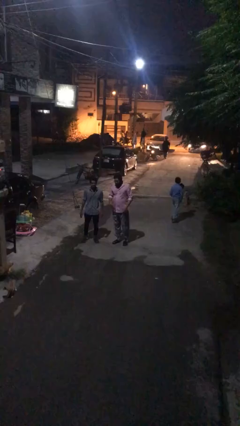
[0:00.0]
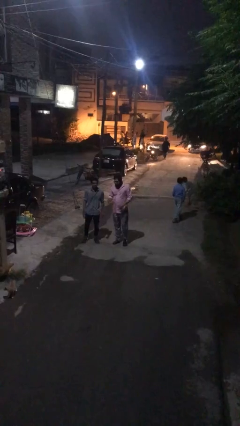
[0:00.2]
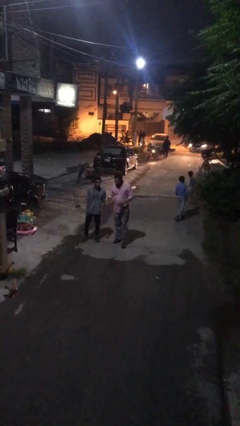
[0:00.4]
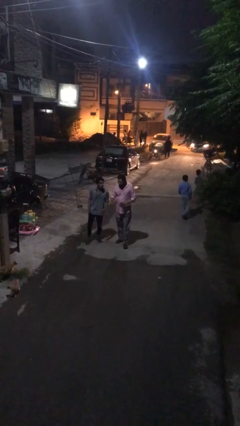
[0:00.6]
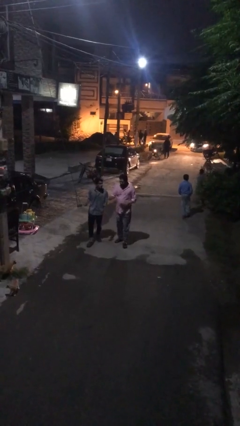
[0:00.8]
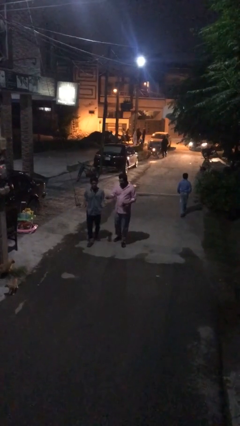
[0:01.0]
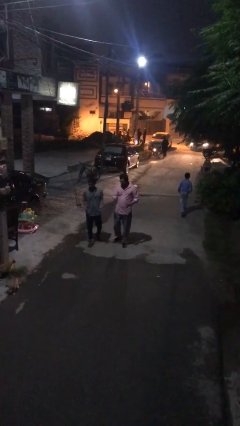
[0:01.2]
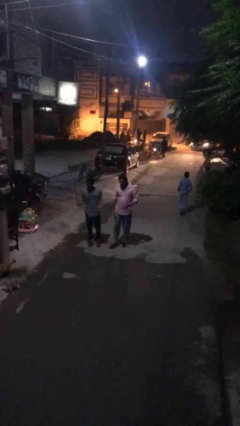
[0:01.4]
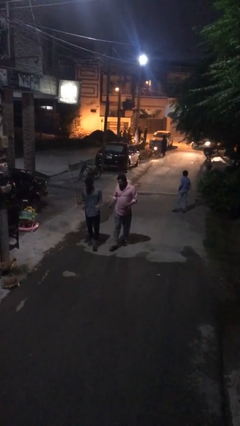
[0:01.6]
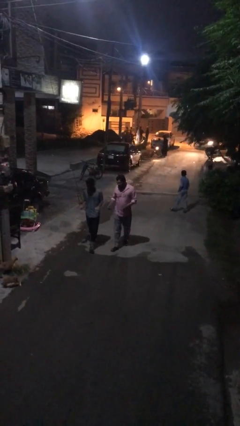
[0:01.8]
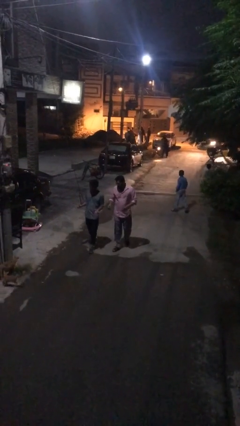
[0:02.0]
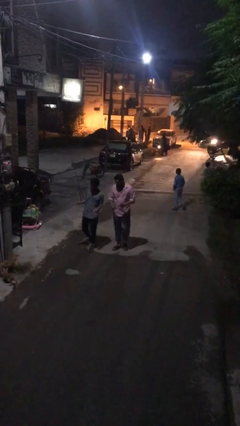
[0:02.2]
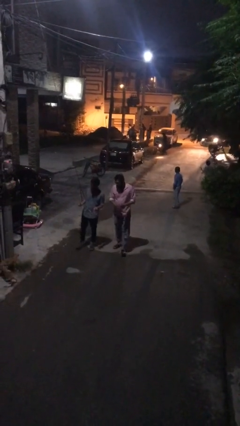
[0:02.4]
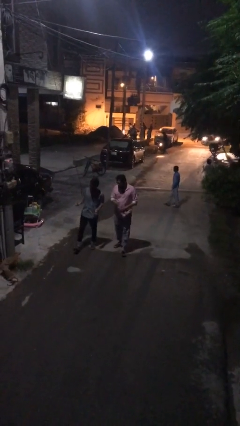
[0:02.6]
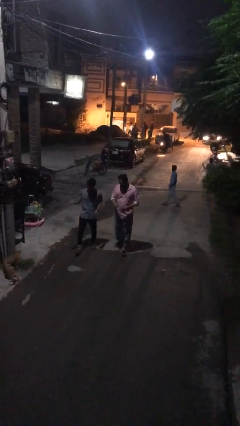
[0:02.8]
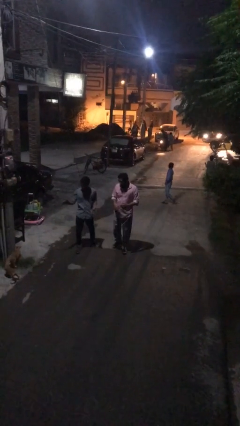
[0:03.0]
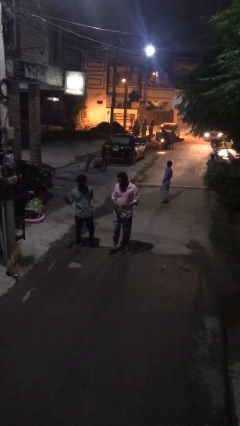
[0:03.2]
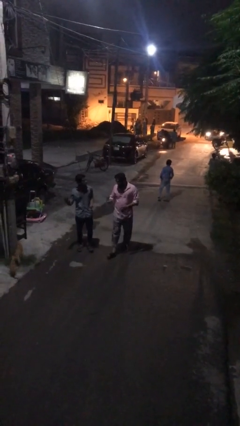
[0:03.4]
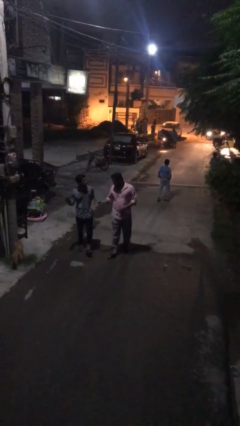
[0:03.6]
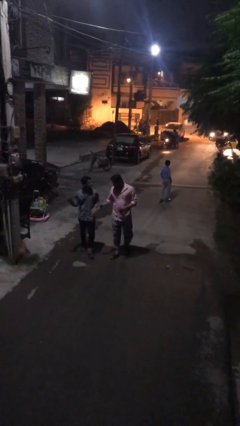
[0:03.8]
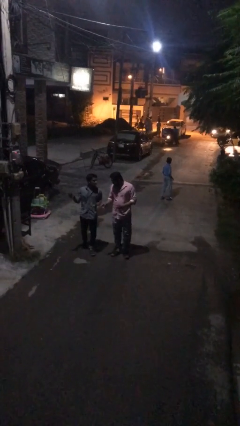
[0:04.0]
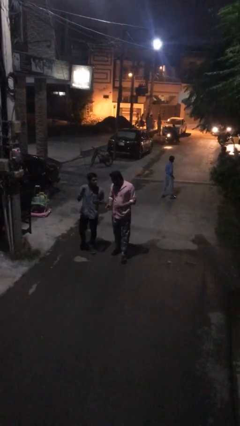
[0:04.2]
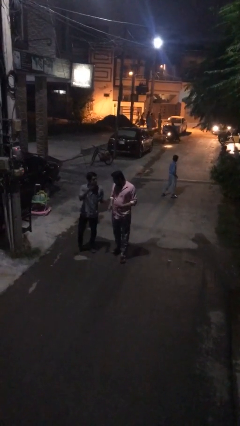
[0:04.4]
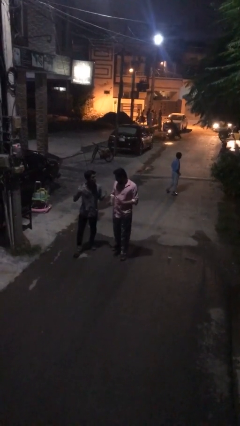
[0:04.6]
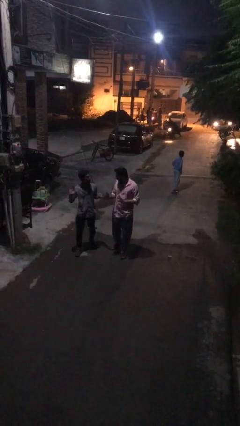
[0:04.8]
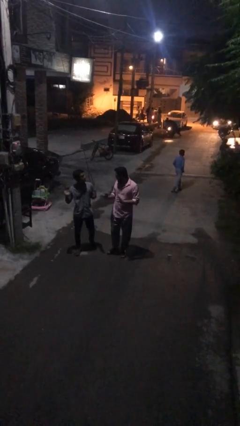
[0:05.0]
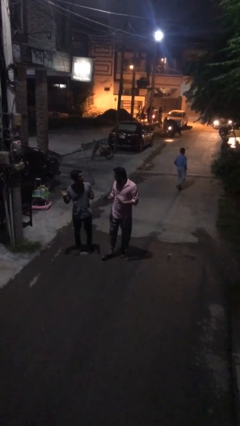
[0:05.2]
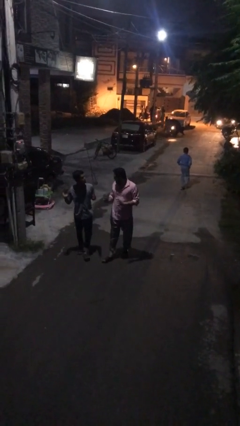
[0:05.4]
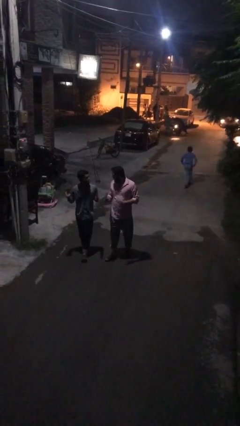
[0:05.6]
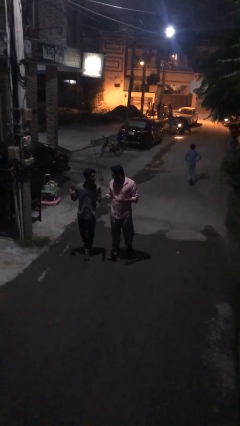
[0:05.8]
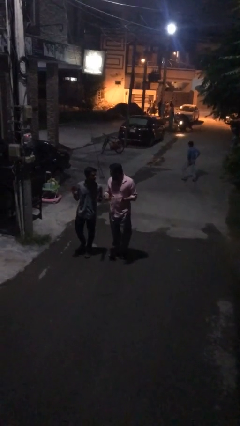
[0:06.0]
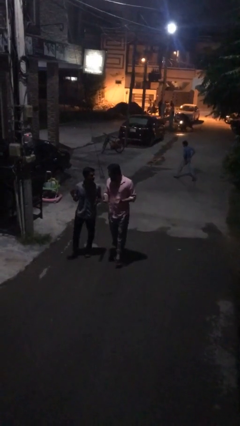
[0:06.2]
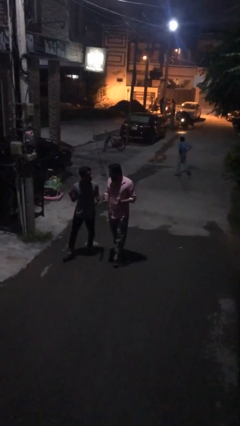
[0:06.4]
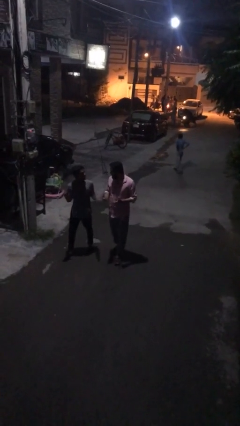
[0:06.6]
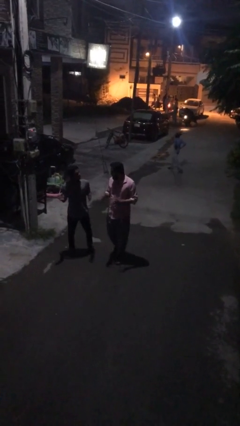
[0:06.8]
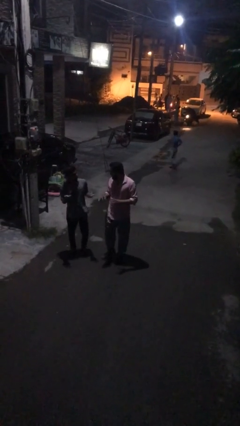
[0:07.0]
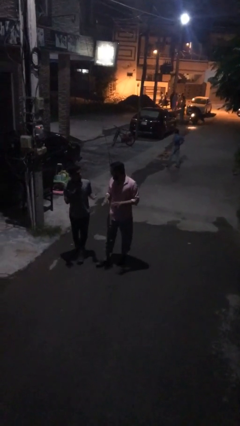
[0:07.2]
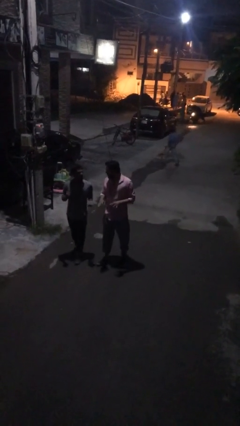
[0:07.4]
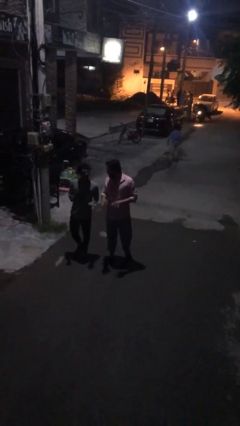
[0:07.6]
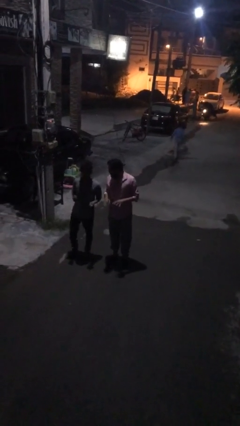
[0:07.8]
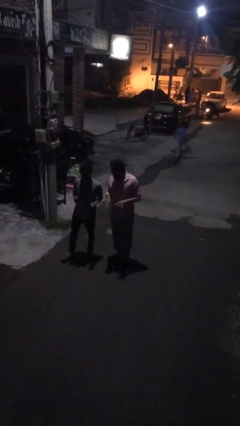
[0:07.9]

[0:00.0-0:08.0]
person talks to person

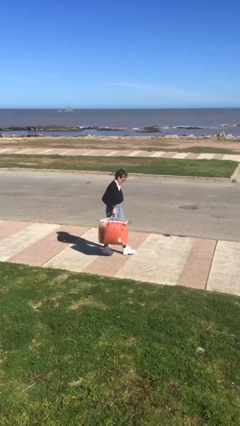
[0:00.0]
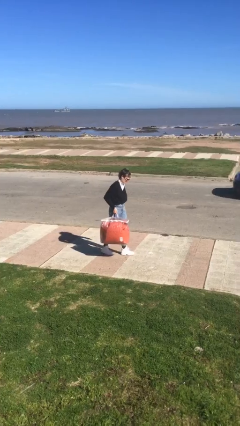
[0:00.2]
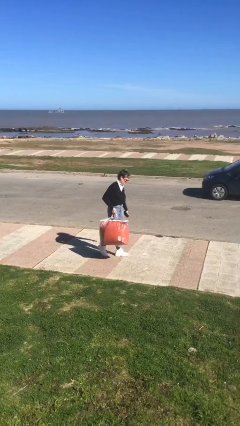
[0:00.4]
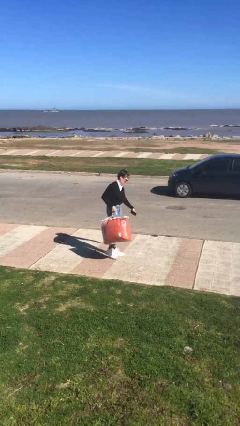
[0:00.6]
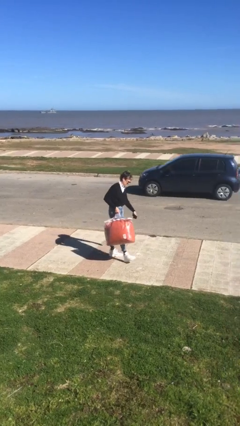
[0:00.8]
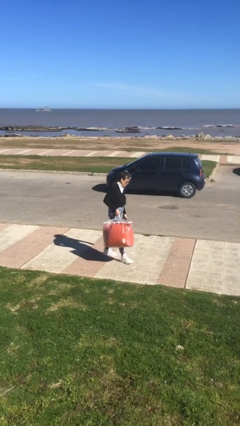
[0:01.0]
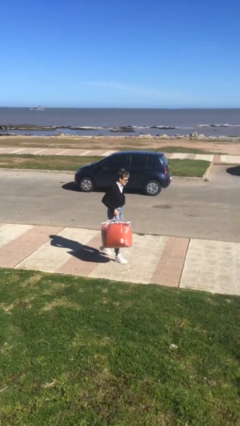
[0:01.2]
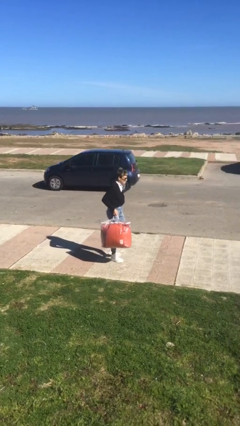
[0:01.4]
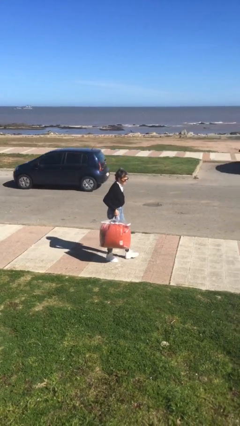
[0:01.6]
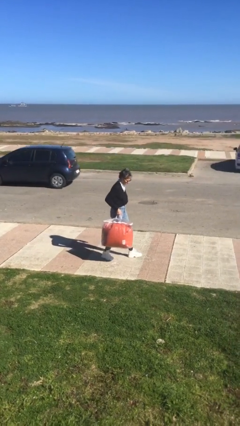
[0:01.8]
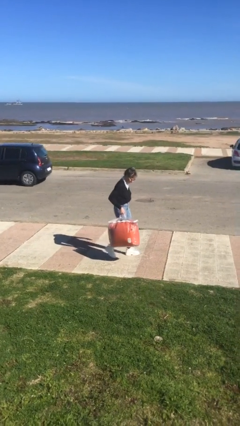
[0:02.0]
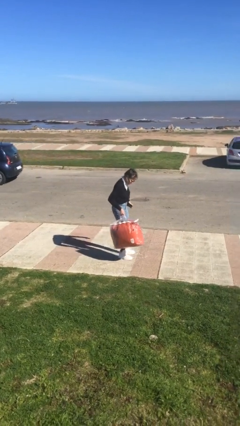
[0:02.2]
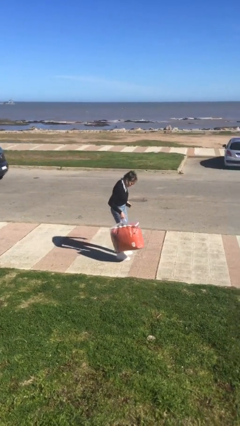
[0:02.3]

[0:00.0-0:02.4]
person carries heavy object

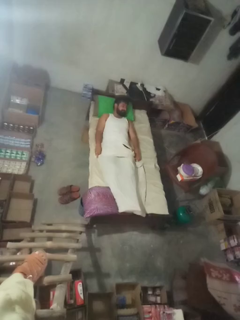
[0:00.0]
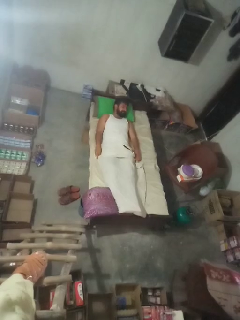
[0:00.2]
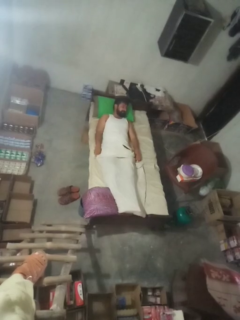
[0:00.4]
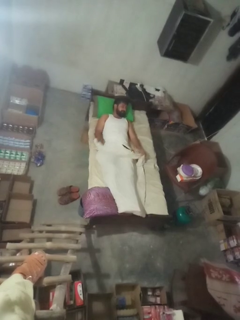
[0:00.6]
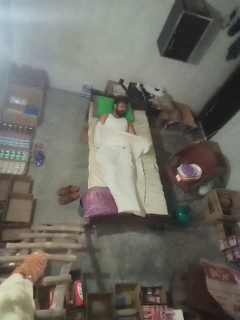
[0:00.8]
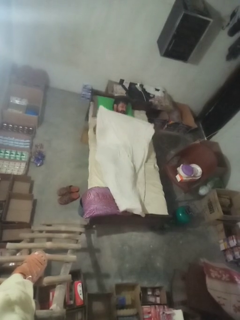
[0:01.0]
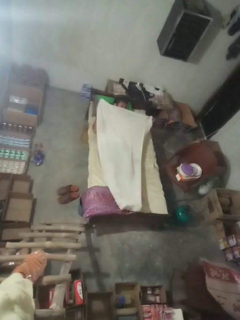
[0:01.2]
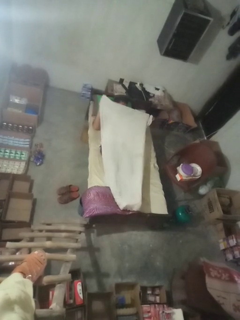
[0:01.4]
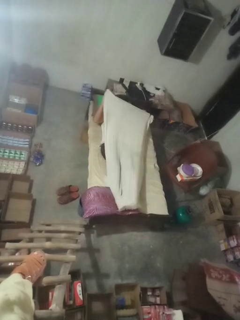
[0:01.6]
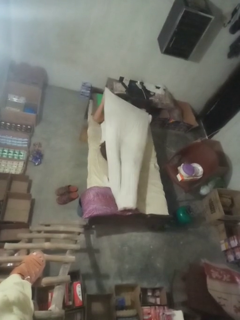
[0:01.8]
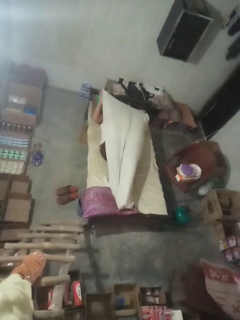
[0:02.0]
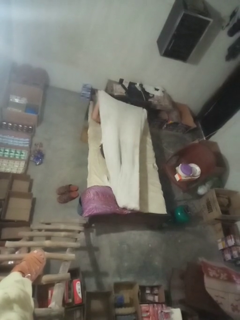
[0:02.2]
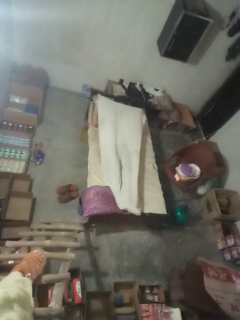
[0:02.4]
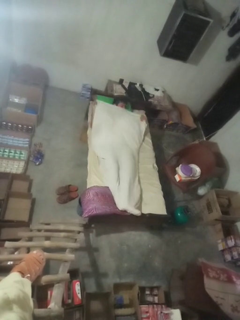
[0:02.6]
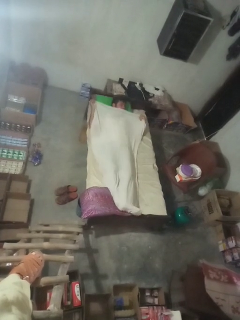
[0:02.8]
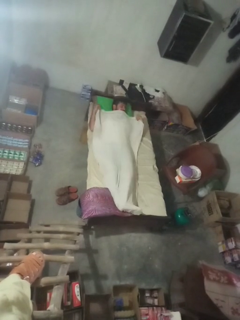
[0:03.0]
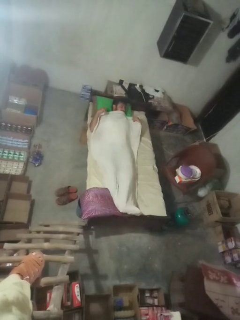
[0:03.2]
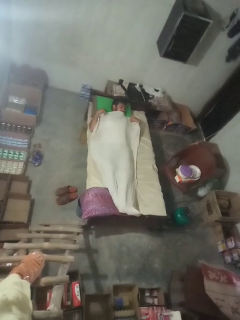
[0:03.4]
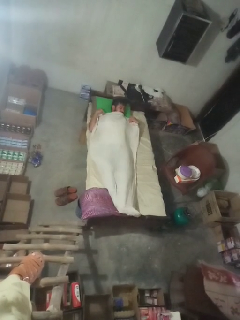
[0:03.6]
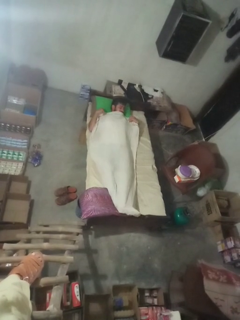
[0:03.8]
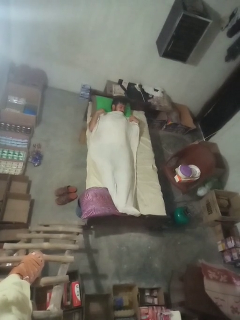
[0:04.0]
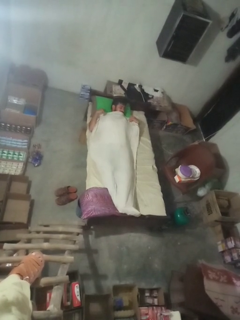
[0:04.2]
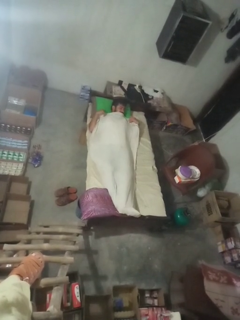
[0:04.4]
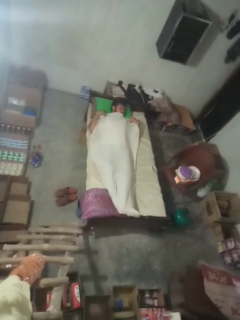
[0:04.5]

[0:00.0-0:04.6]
person covers with bedsheets

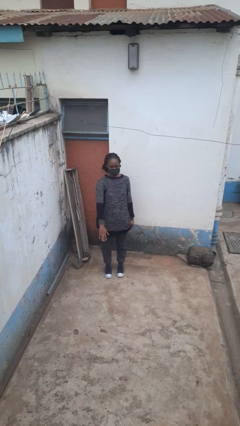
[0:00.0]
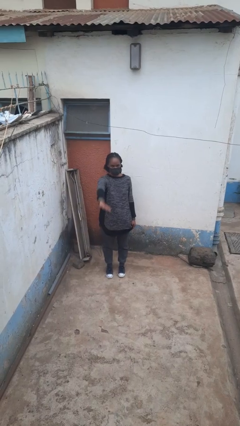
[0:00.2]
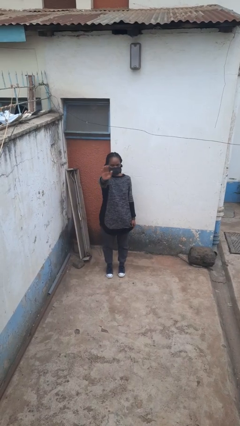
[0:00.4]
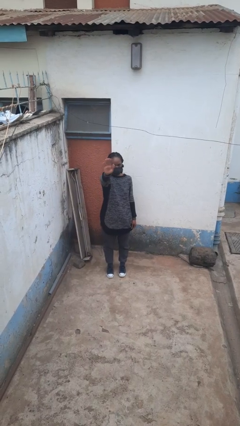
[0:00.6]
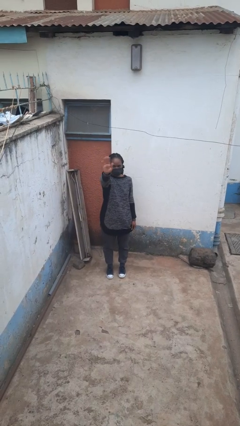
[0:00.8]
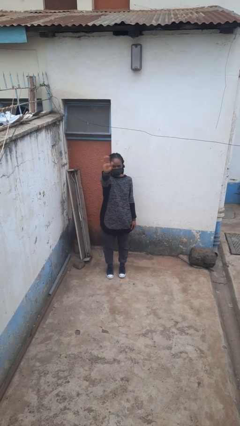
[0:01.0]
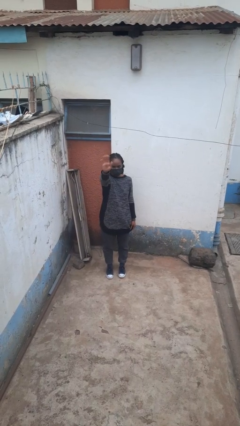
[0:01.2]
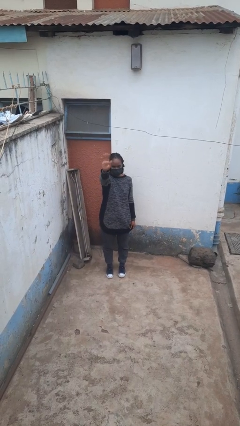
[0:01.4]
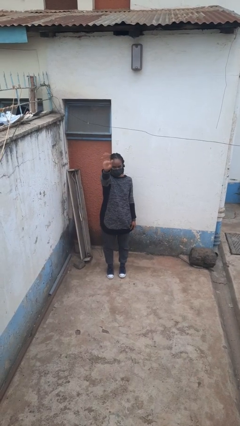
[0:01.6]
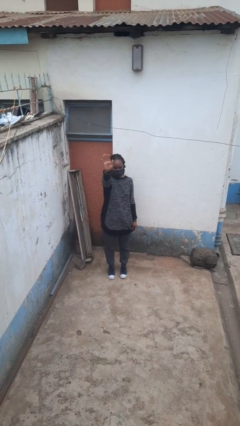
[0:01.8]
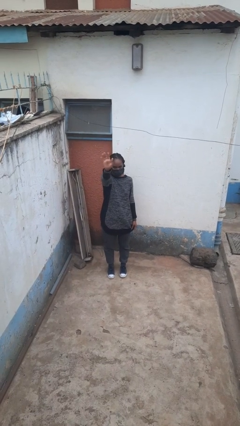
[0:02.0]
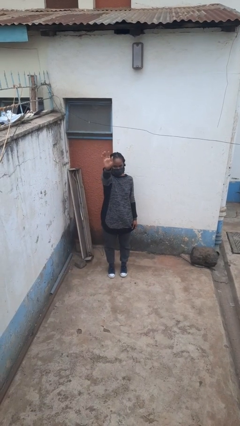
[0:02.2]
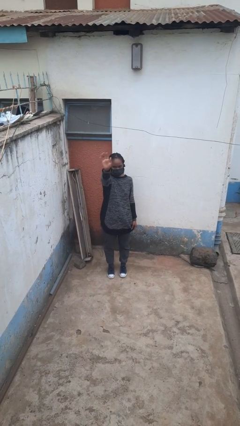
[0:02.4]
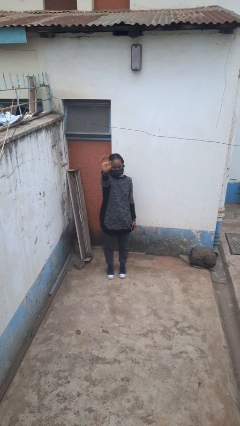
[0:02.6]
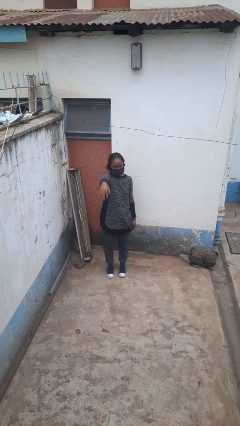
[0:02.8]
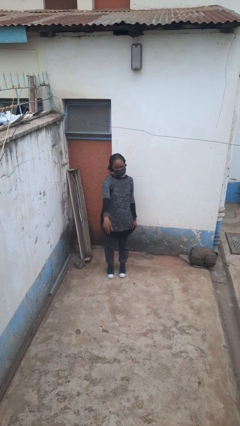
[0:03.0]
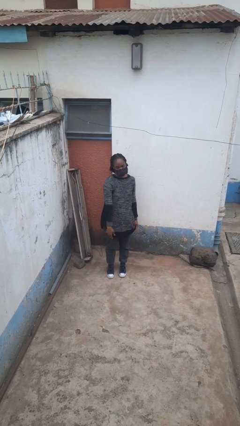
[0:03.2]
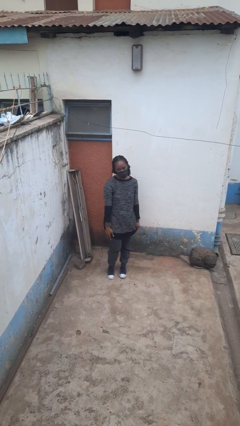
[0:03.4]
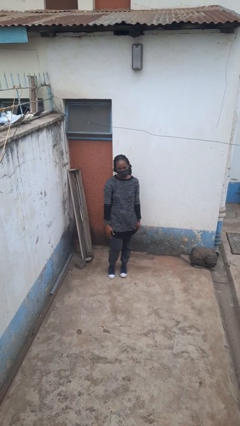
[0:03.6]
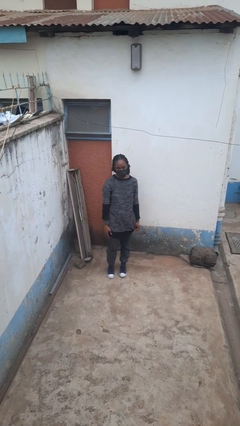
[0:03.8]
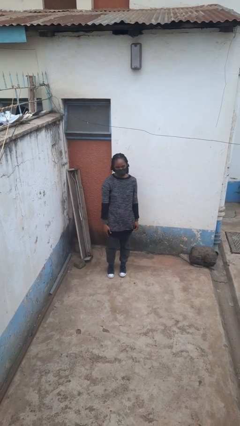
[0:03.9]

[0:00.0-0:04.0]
person waves at person
